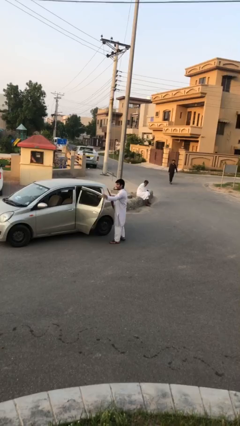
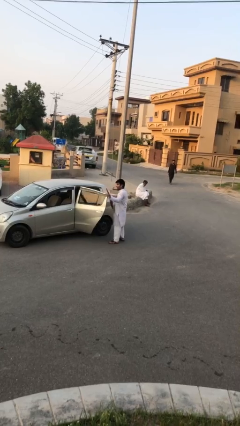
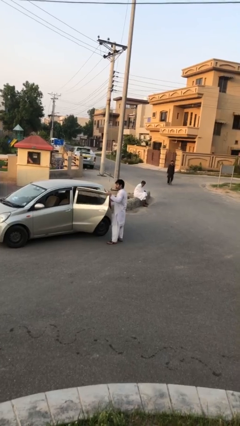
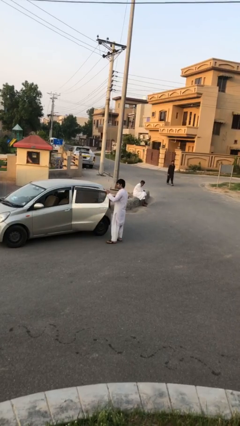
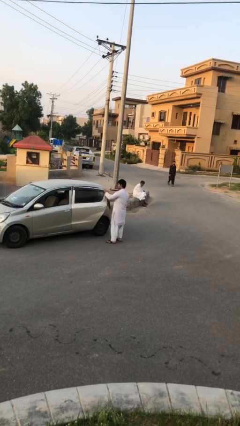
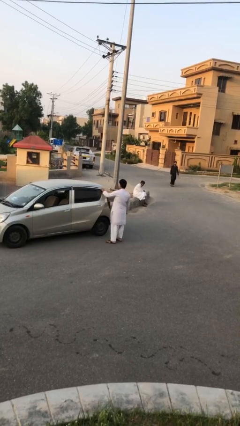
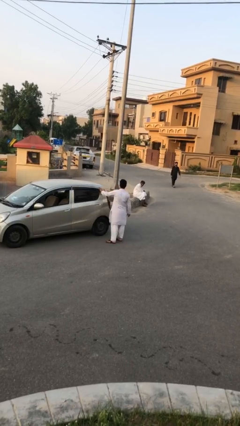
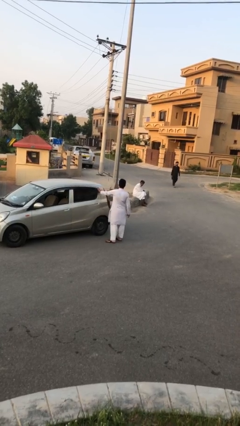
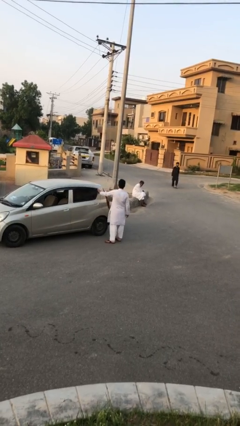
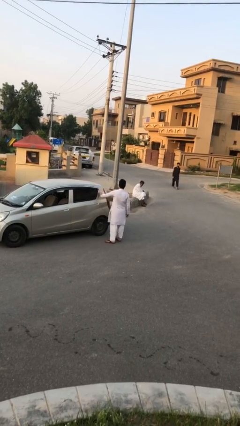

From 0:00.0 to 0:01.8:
person closes car door

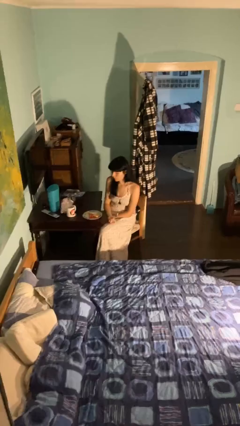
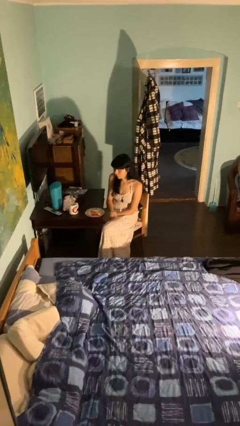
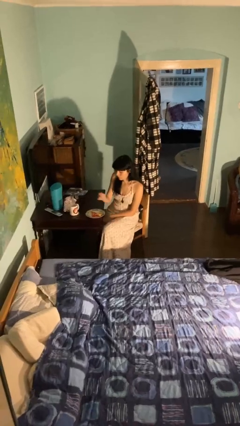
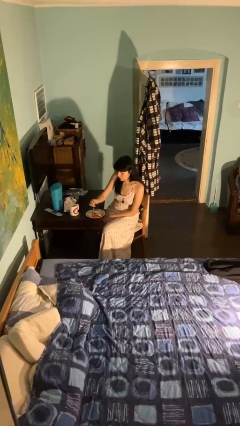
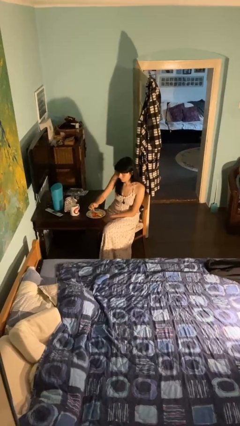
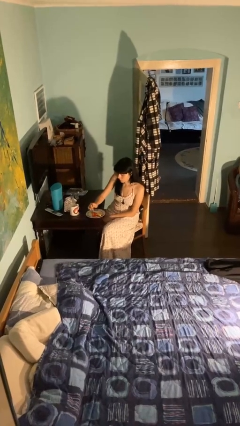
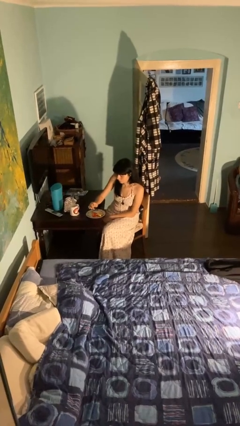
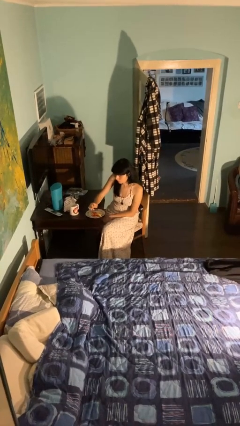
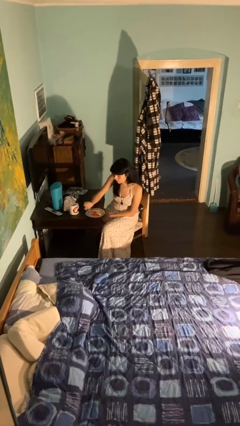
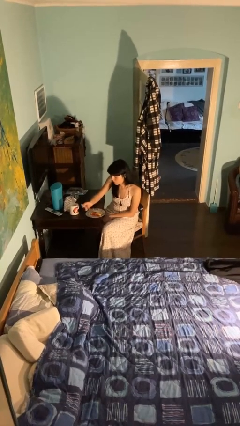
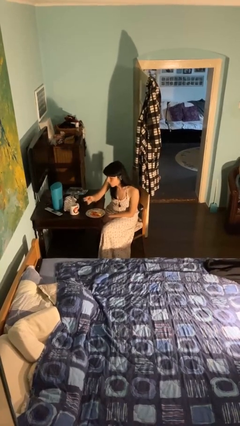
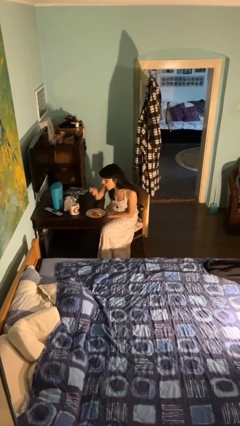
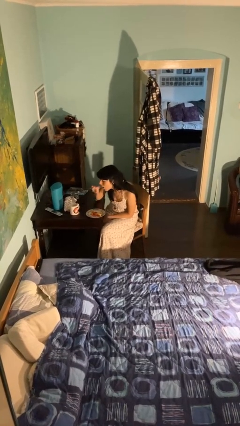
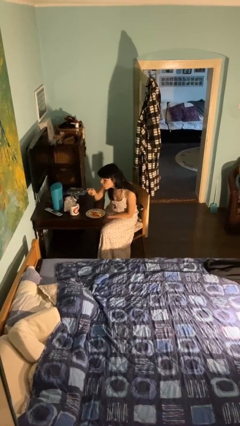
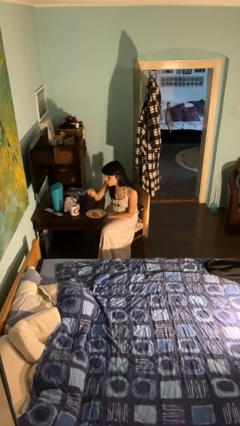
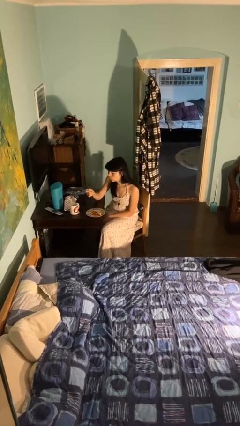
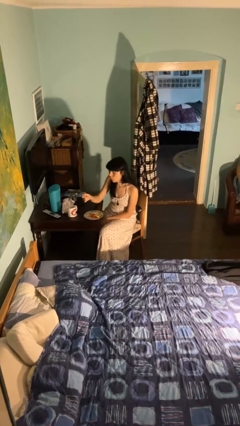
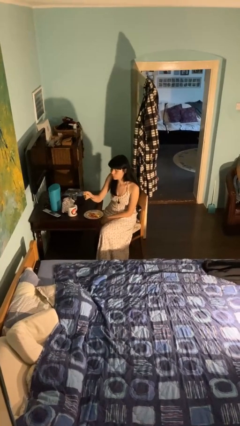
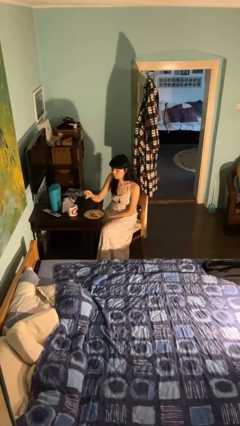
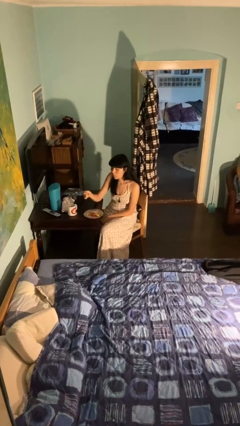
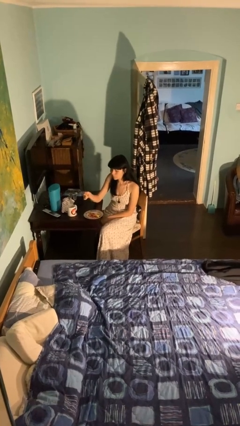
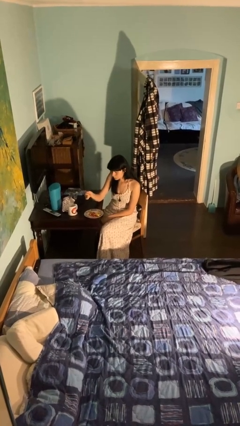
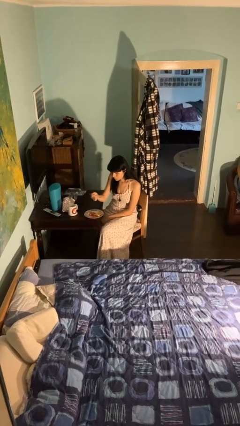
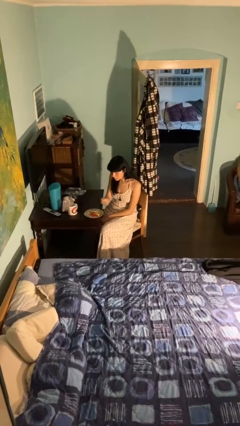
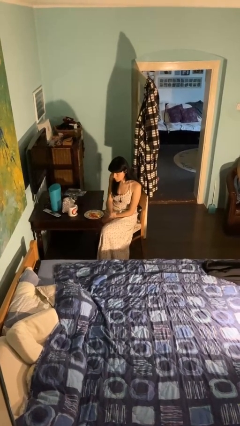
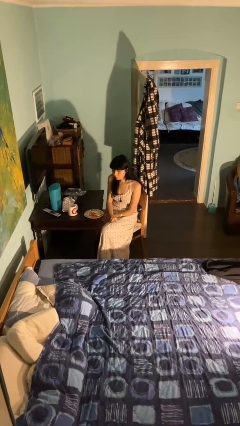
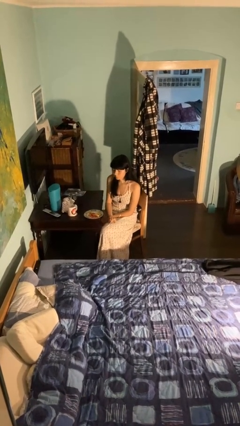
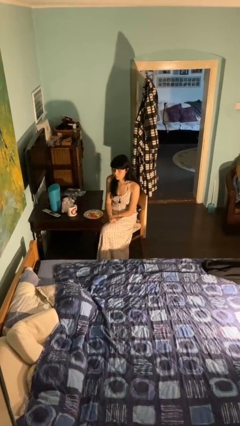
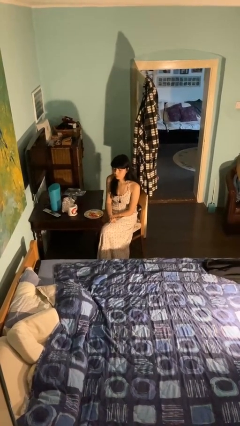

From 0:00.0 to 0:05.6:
person eats with utensil

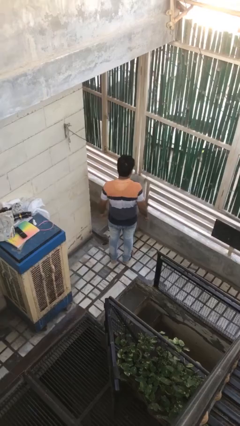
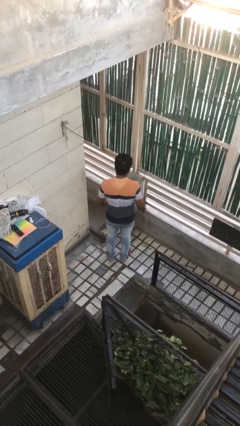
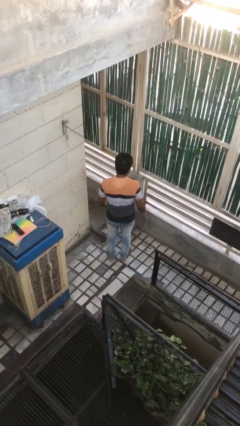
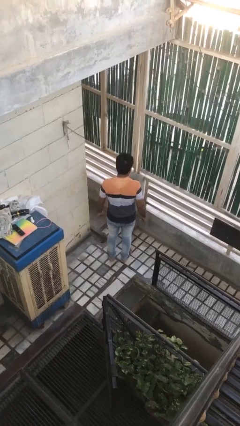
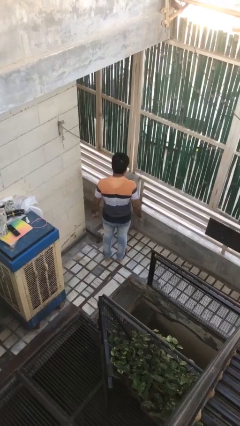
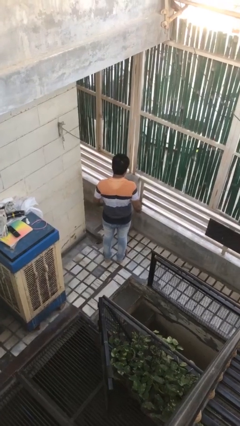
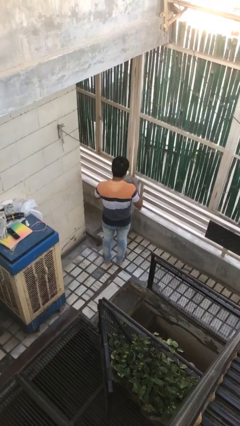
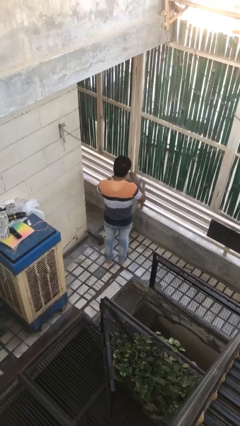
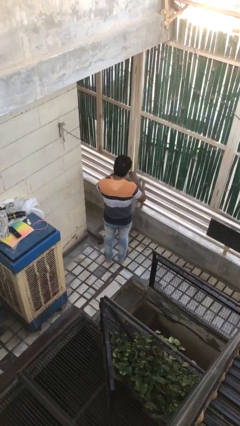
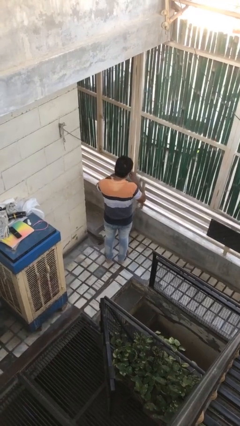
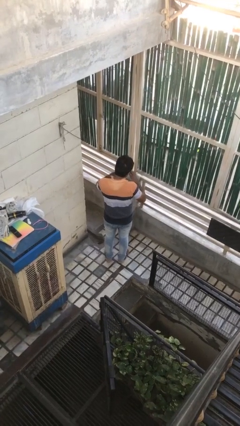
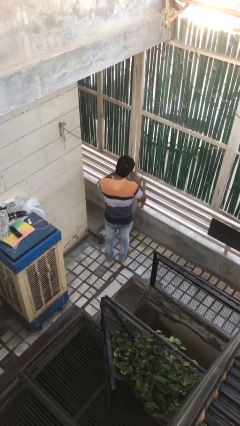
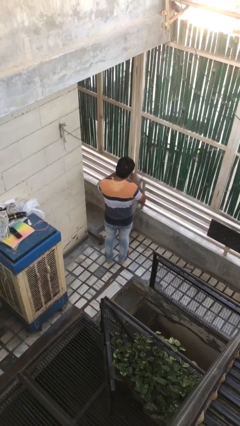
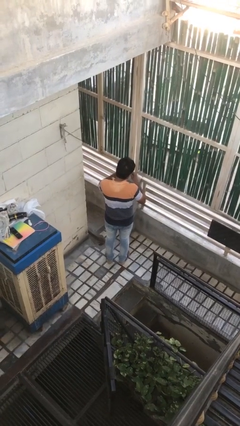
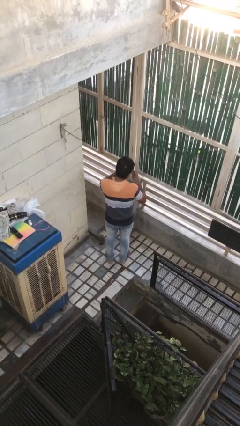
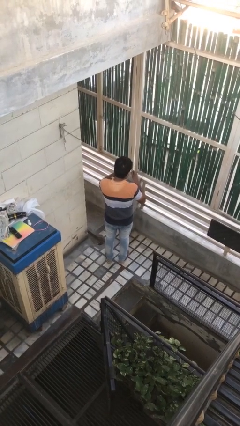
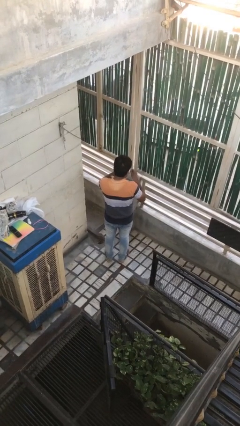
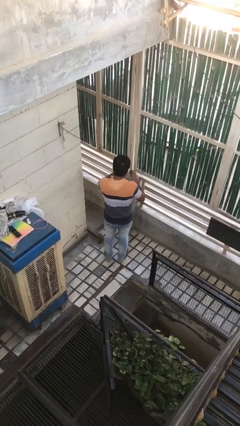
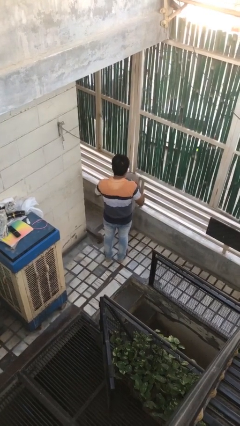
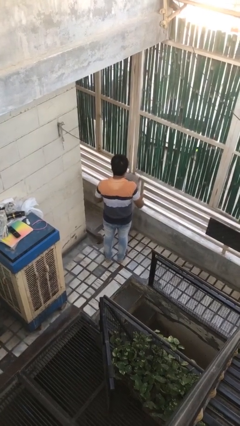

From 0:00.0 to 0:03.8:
person files fingernails

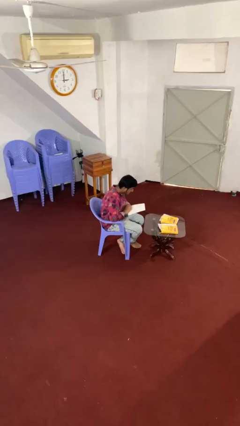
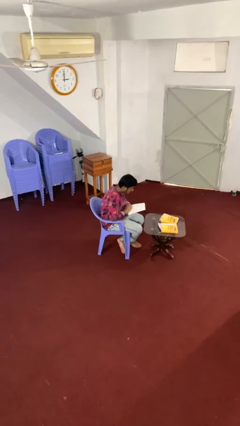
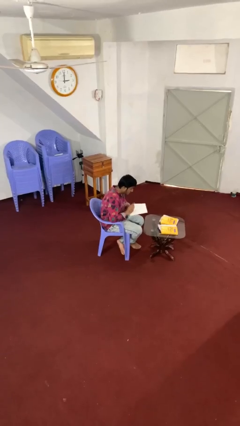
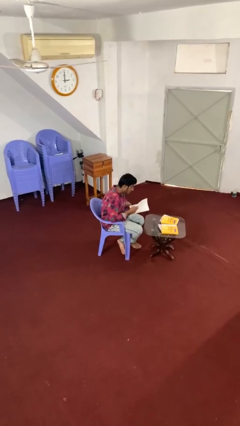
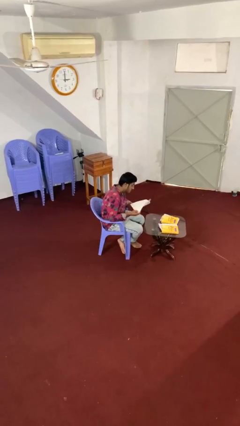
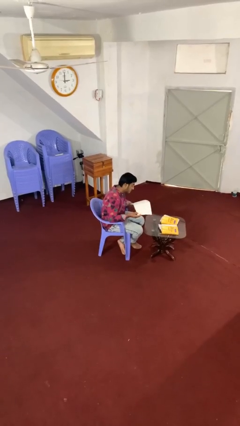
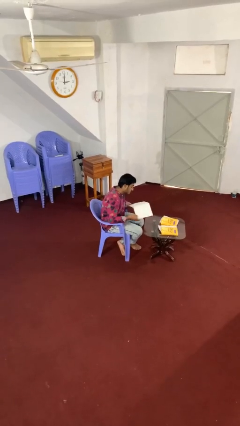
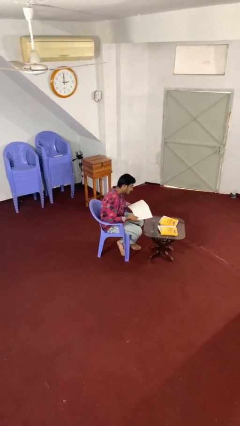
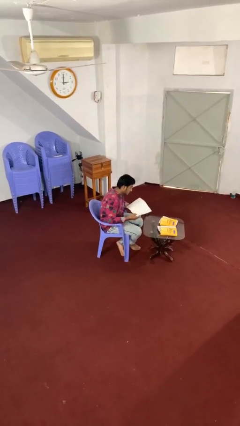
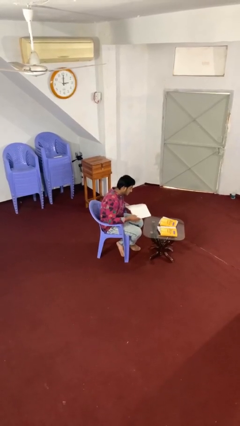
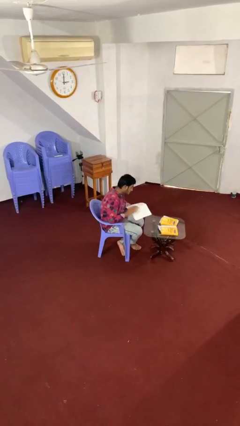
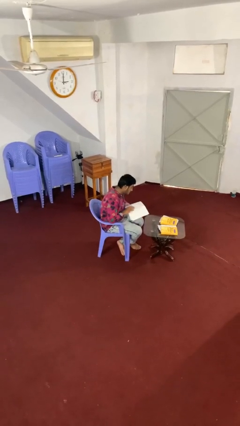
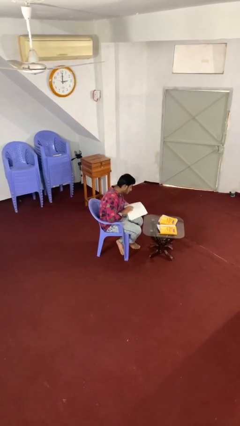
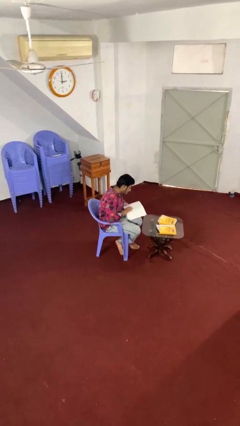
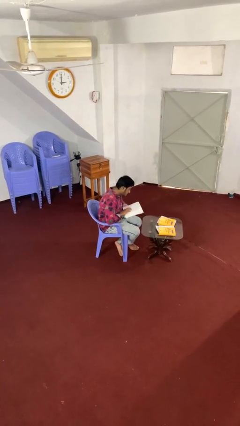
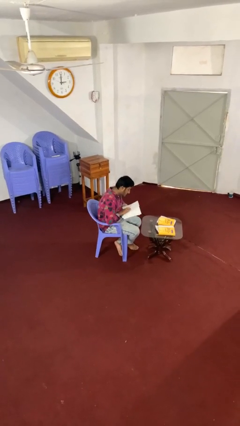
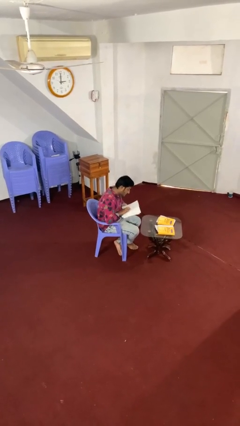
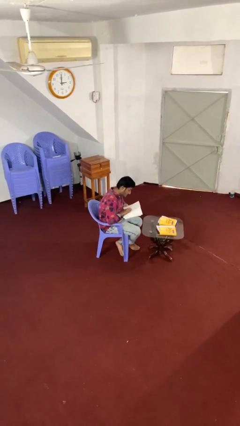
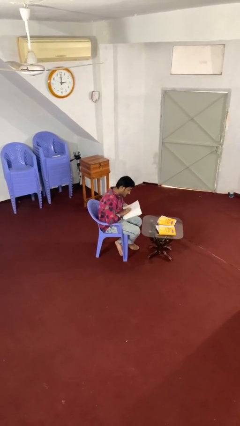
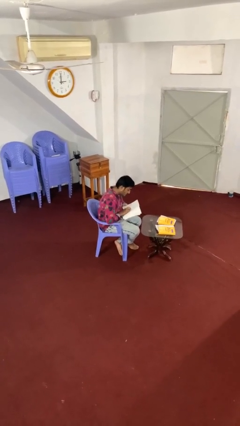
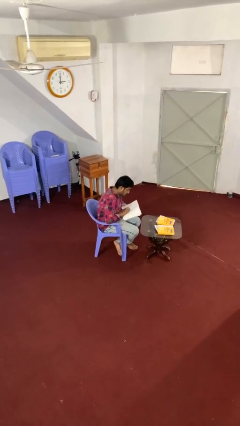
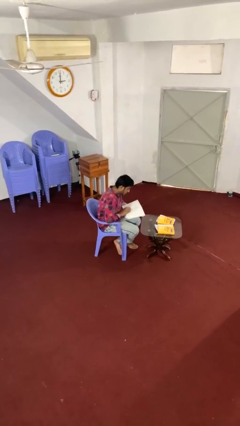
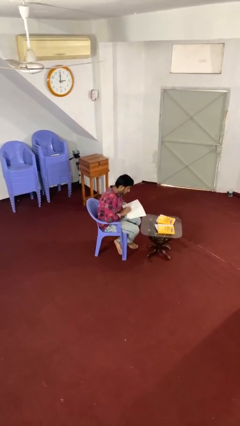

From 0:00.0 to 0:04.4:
person reads document

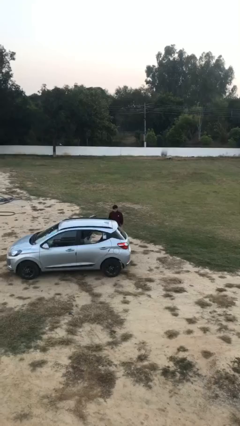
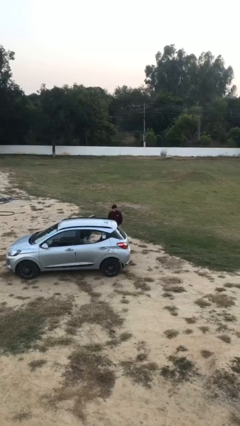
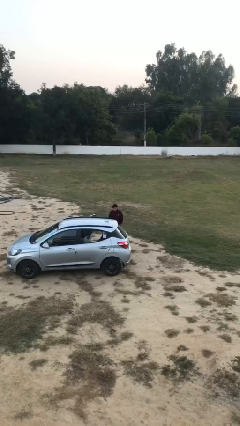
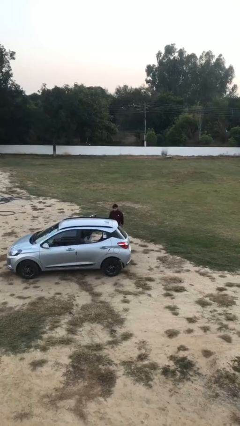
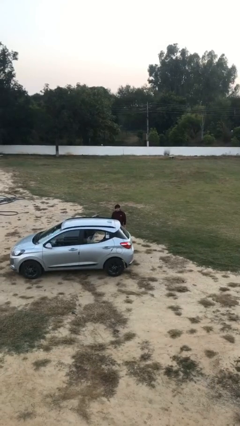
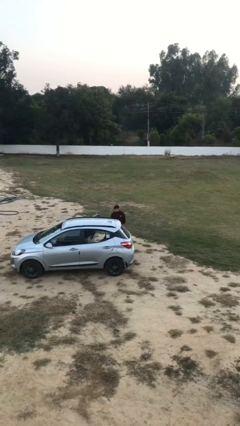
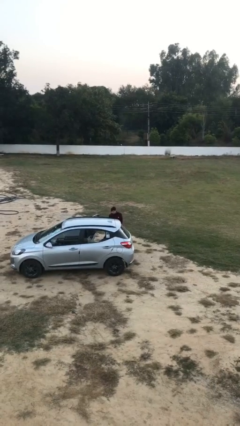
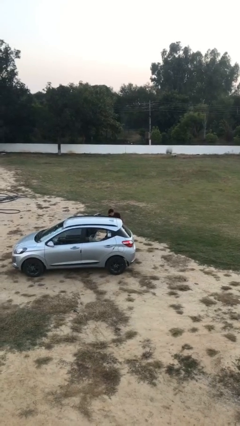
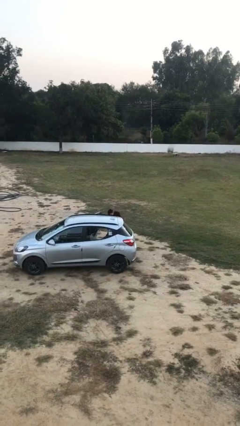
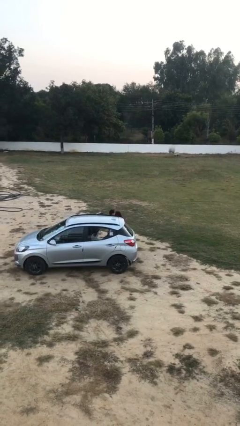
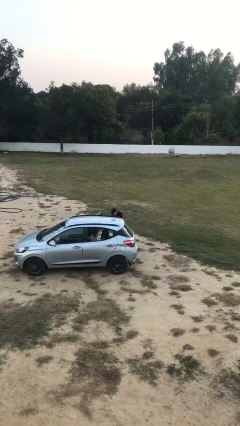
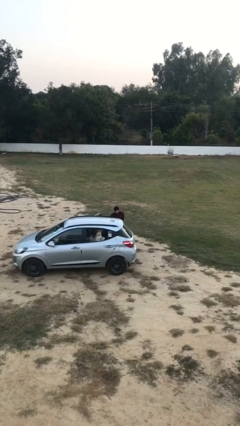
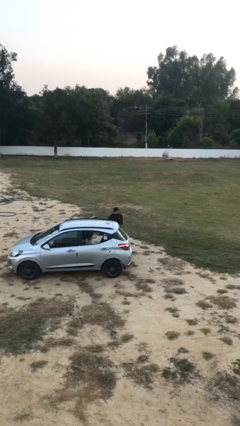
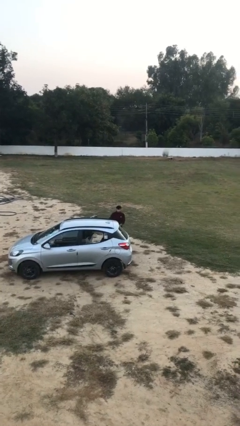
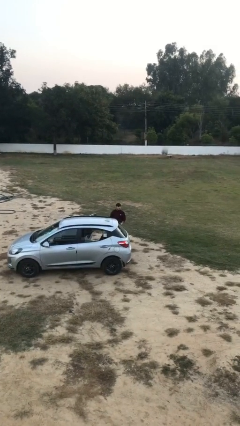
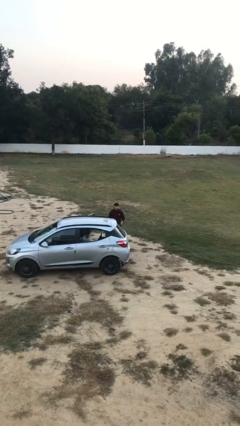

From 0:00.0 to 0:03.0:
person unloads car
